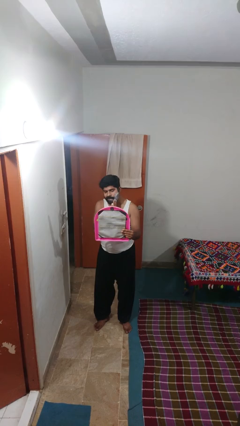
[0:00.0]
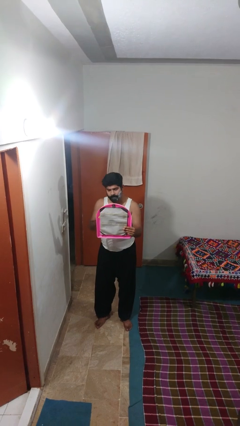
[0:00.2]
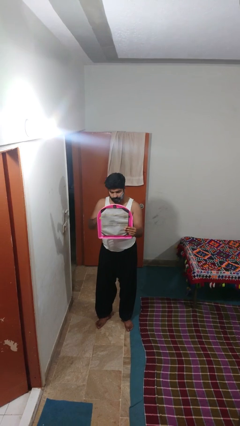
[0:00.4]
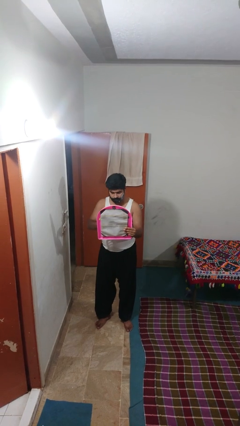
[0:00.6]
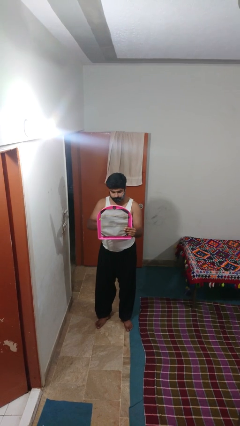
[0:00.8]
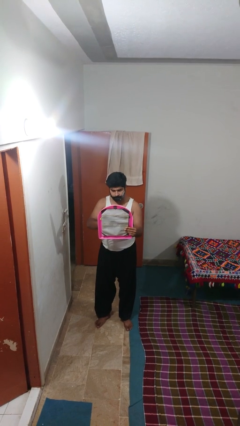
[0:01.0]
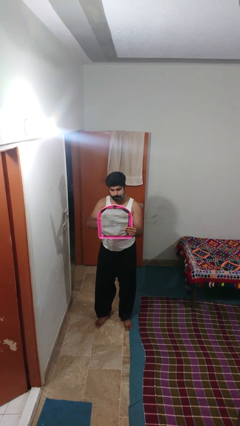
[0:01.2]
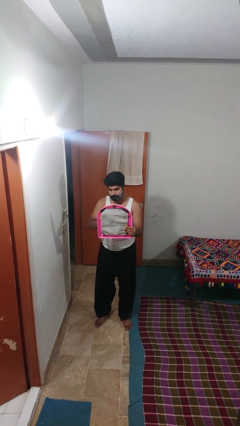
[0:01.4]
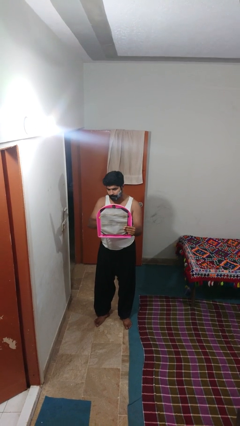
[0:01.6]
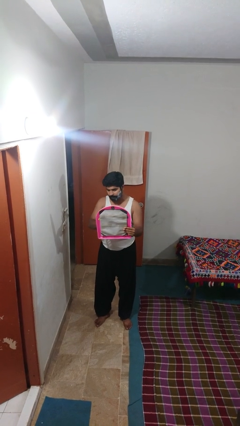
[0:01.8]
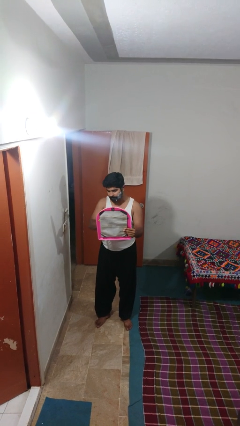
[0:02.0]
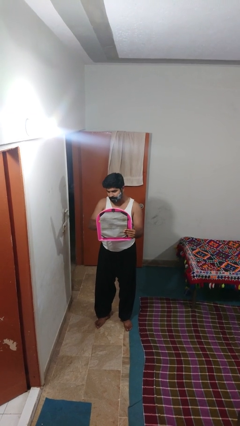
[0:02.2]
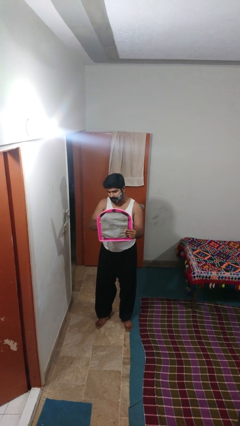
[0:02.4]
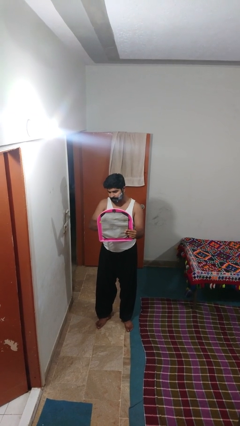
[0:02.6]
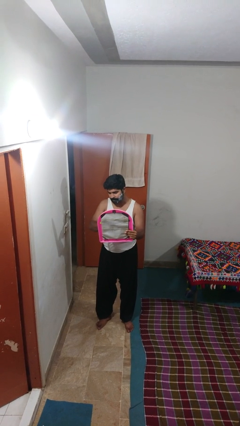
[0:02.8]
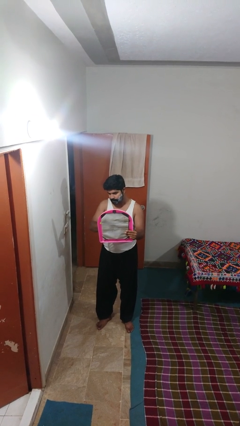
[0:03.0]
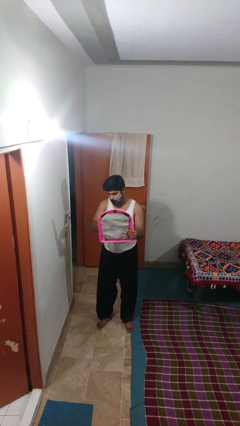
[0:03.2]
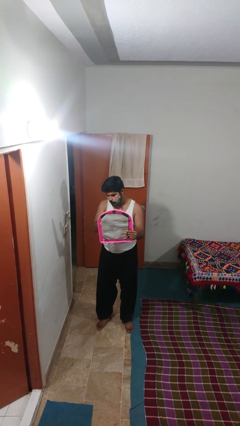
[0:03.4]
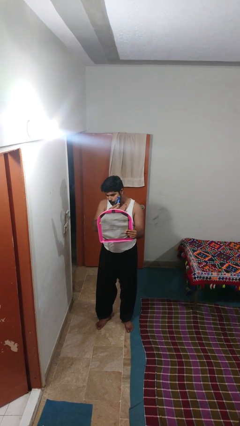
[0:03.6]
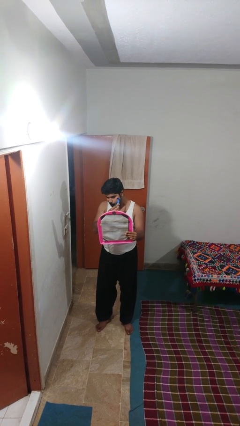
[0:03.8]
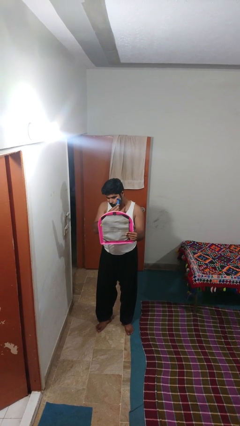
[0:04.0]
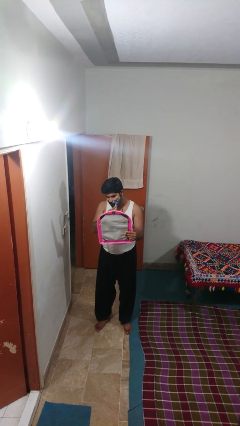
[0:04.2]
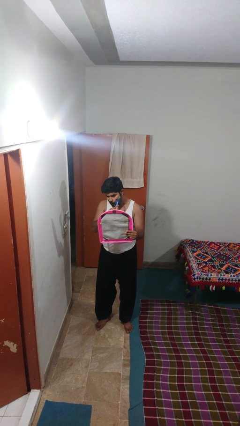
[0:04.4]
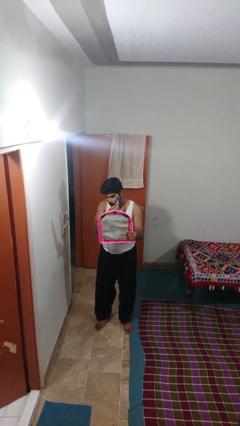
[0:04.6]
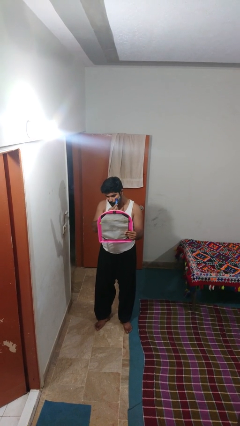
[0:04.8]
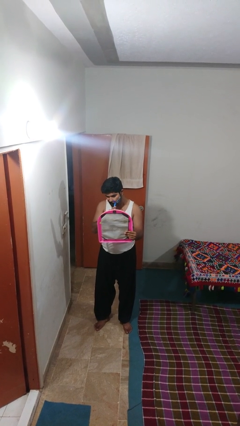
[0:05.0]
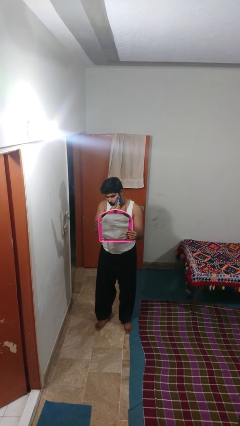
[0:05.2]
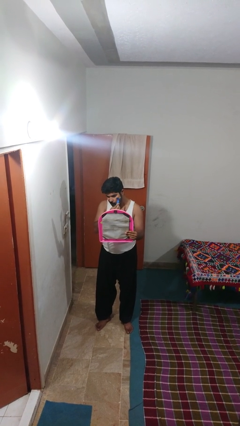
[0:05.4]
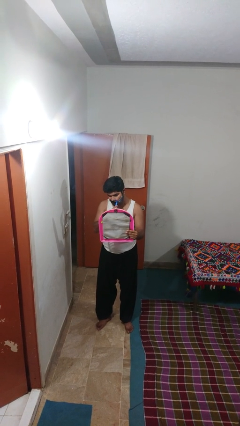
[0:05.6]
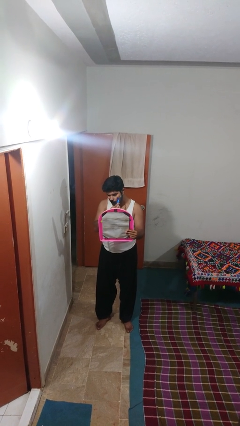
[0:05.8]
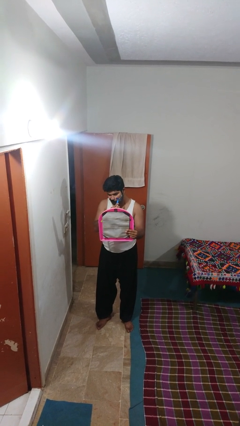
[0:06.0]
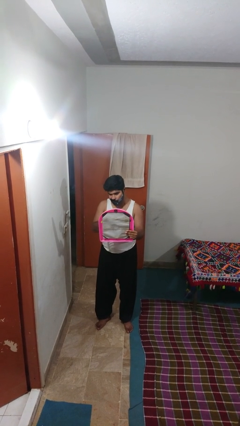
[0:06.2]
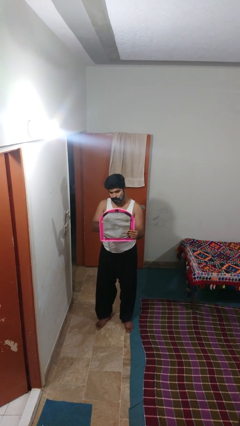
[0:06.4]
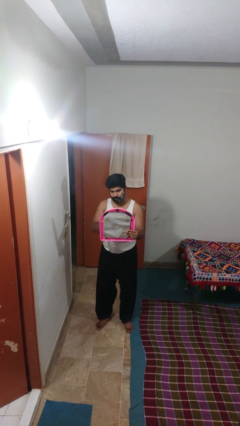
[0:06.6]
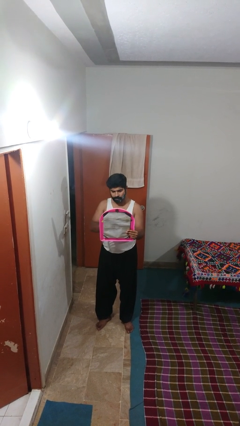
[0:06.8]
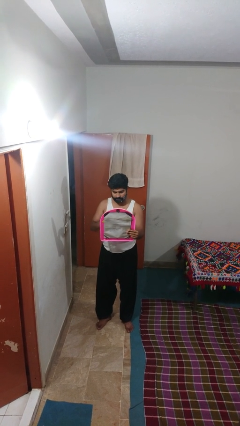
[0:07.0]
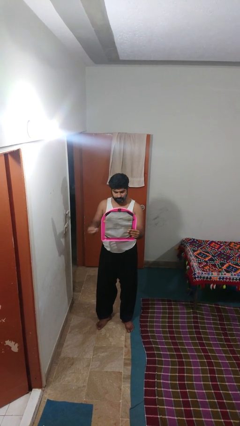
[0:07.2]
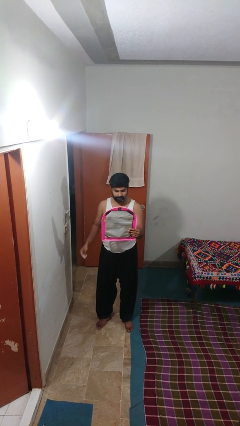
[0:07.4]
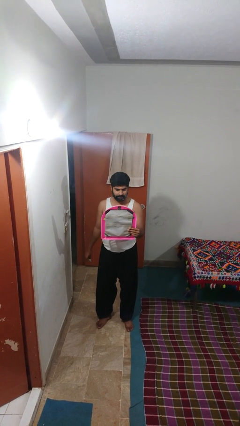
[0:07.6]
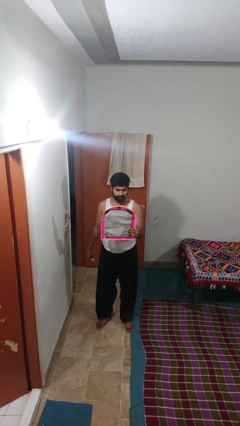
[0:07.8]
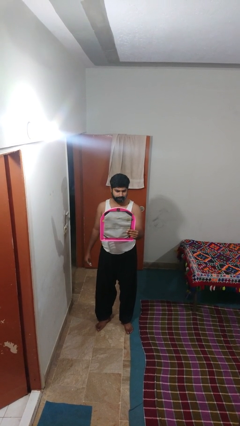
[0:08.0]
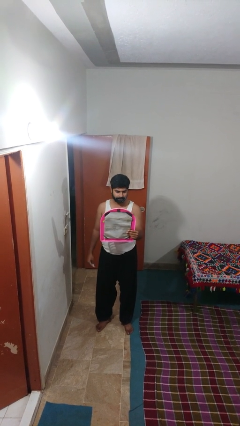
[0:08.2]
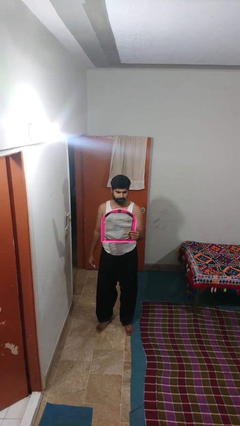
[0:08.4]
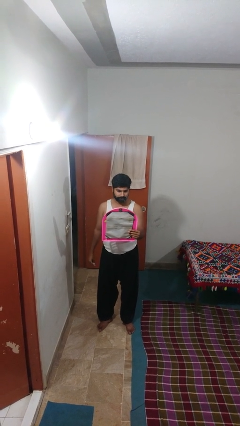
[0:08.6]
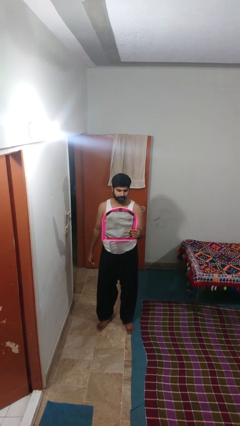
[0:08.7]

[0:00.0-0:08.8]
person shaves face

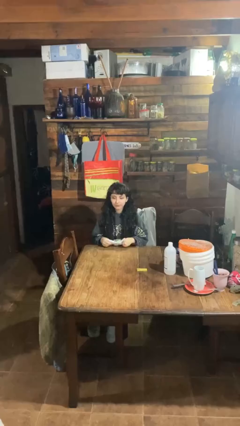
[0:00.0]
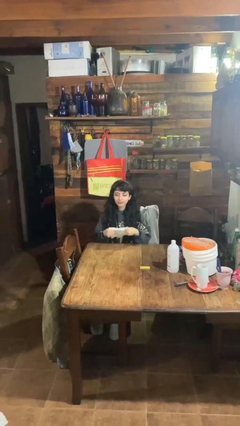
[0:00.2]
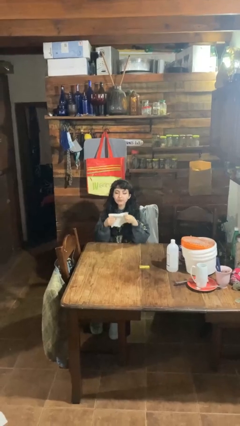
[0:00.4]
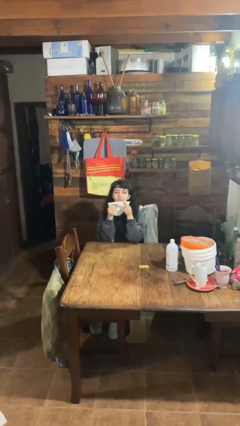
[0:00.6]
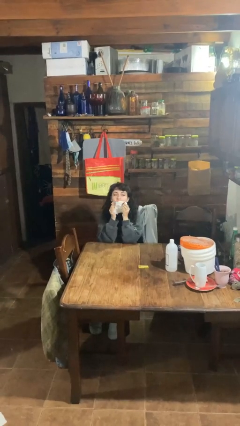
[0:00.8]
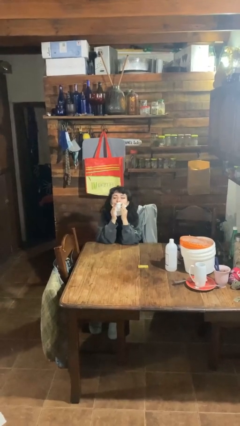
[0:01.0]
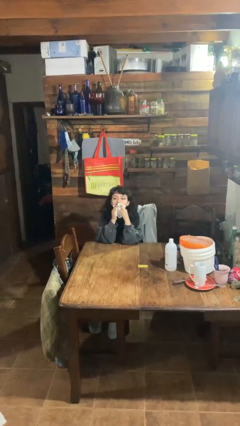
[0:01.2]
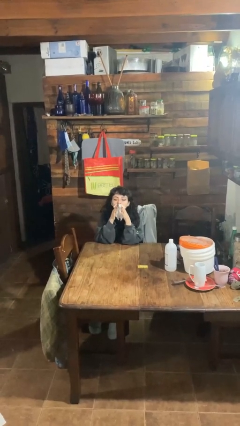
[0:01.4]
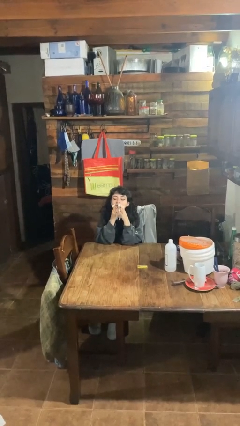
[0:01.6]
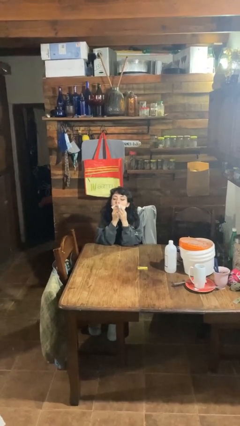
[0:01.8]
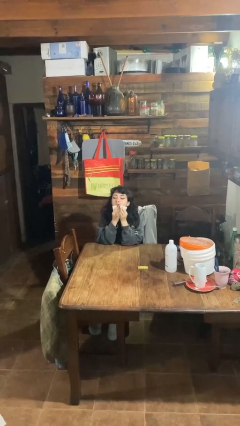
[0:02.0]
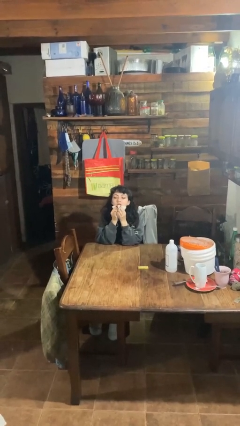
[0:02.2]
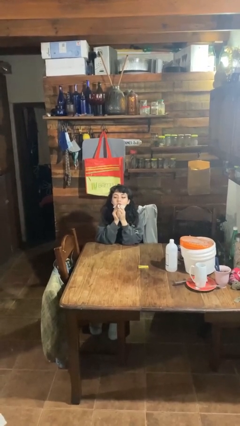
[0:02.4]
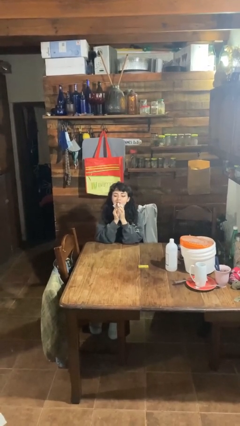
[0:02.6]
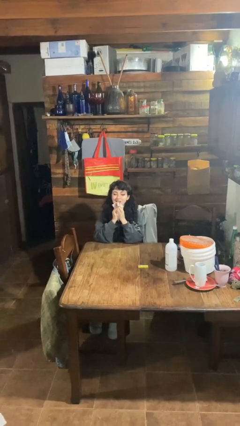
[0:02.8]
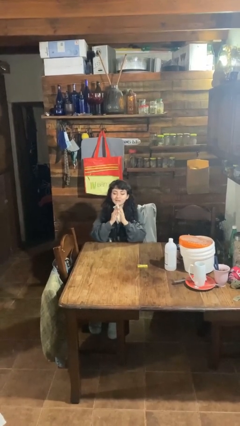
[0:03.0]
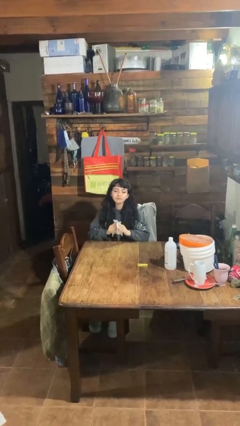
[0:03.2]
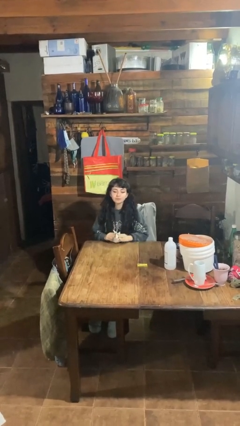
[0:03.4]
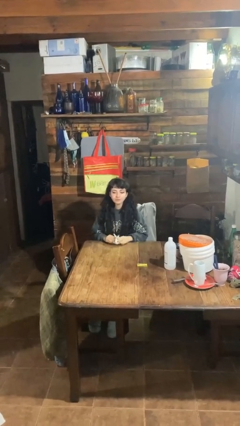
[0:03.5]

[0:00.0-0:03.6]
person wipes mouth with napkin

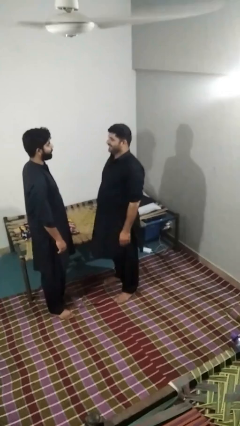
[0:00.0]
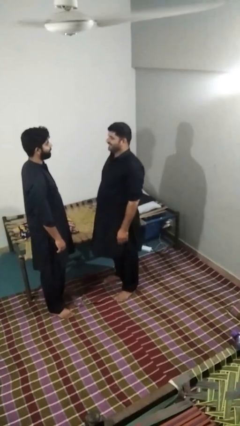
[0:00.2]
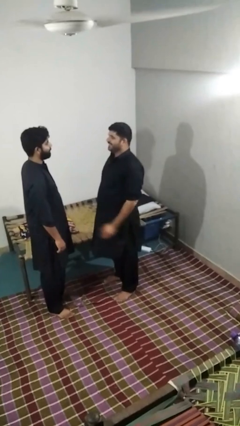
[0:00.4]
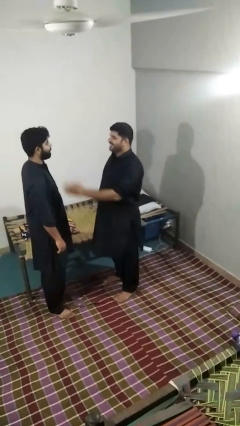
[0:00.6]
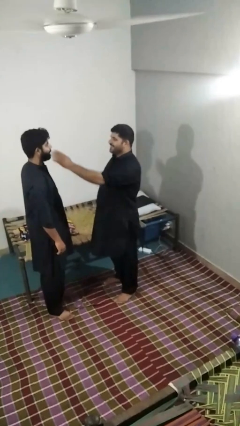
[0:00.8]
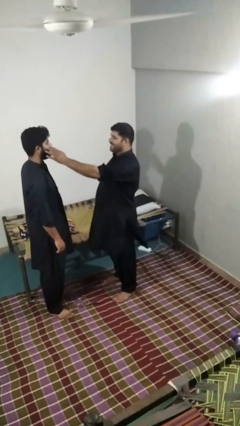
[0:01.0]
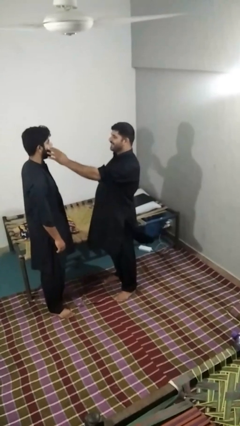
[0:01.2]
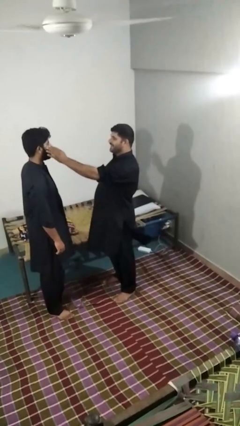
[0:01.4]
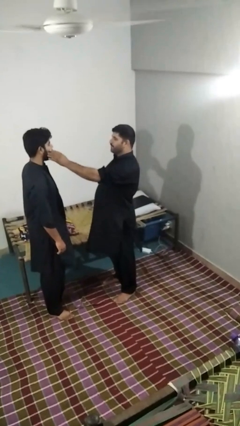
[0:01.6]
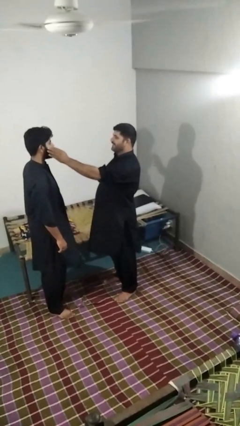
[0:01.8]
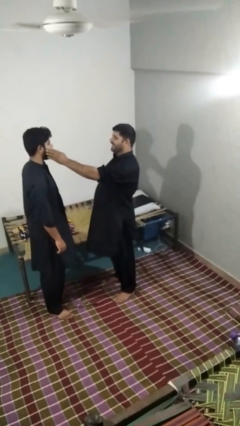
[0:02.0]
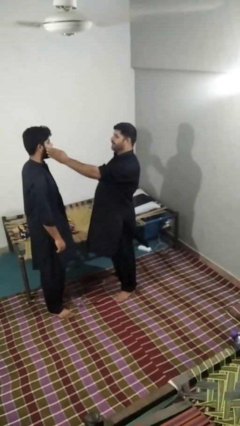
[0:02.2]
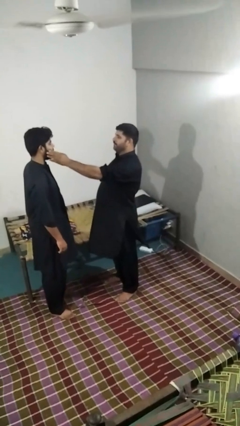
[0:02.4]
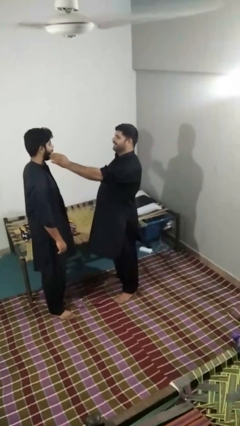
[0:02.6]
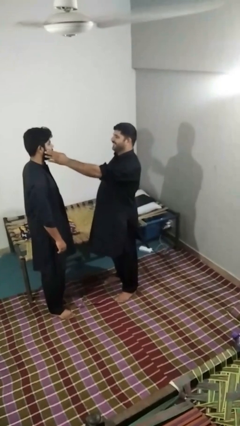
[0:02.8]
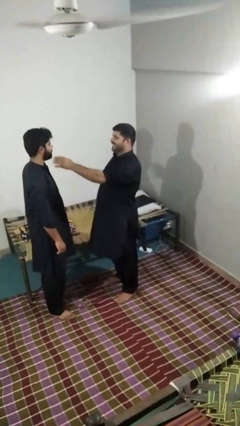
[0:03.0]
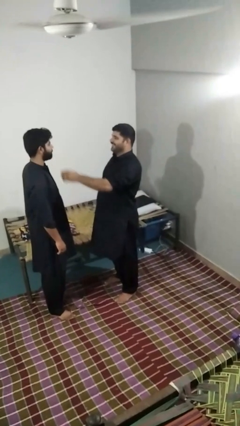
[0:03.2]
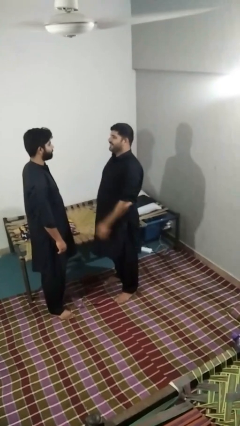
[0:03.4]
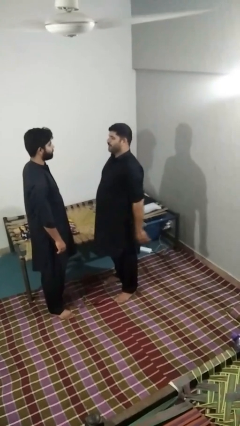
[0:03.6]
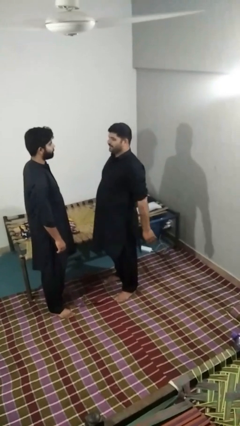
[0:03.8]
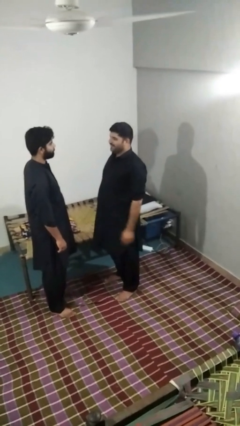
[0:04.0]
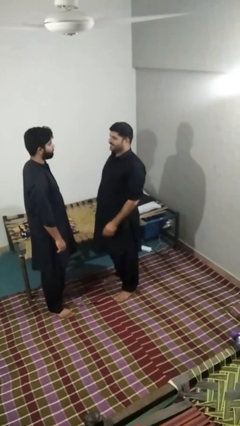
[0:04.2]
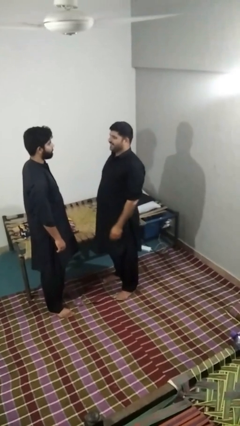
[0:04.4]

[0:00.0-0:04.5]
person touches face of person

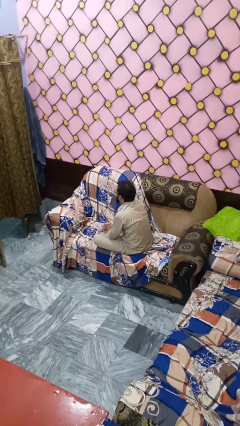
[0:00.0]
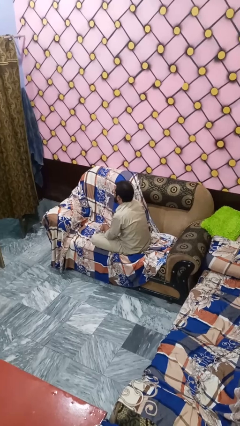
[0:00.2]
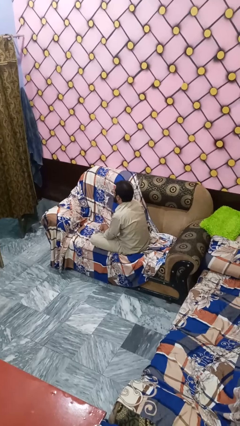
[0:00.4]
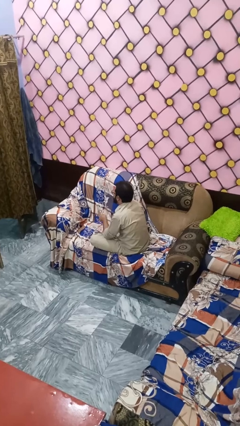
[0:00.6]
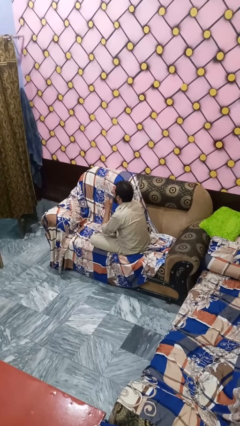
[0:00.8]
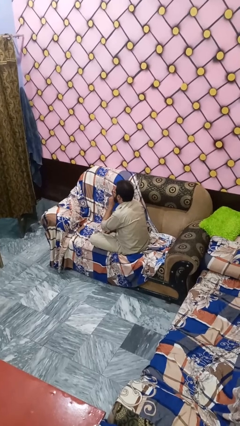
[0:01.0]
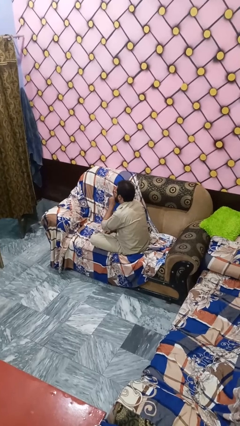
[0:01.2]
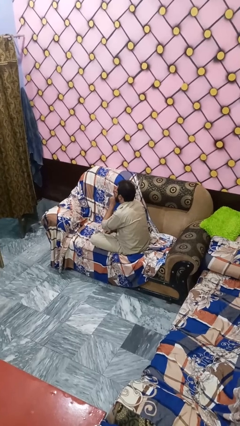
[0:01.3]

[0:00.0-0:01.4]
person gestures be quiet
